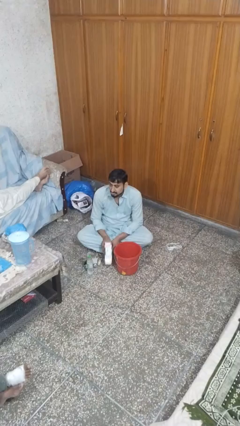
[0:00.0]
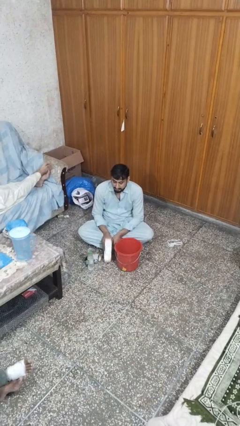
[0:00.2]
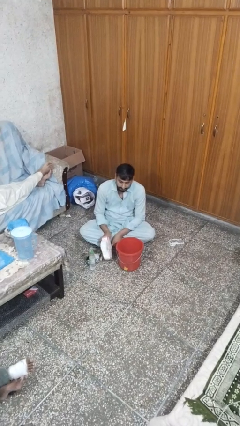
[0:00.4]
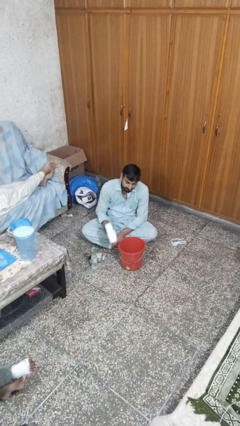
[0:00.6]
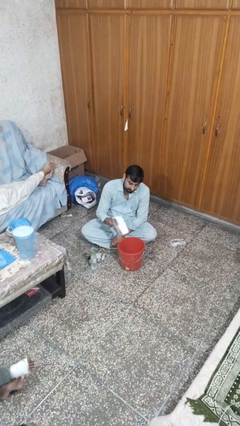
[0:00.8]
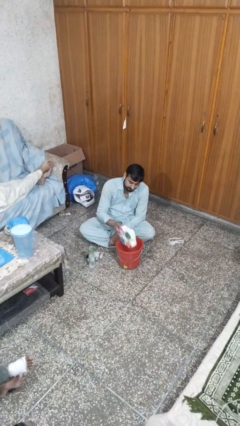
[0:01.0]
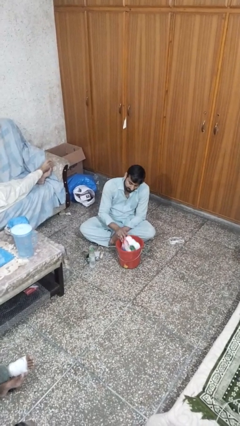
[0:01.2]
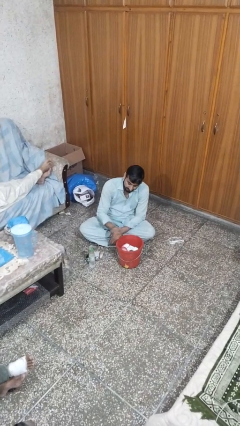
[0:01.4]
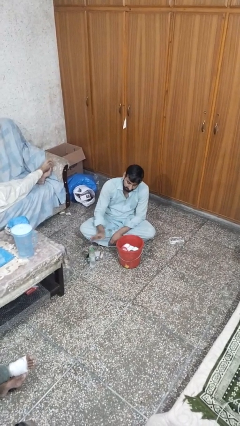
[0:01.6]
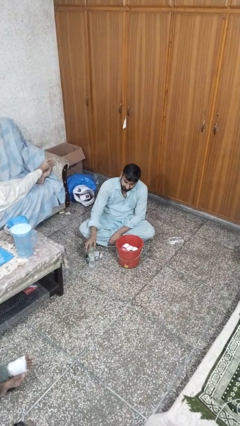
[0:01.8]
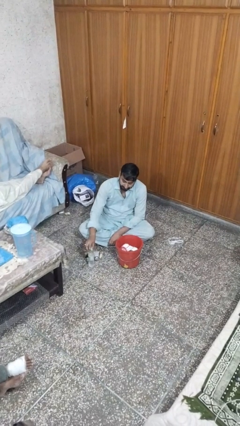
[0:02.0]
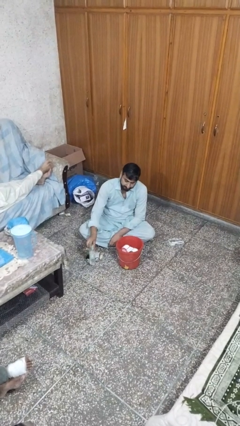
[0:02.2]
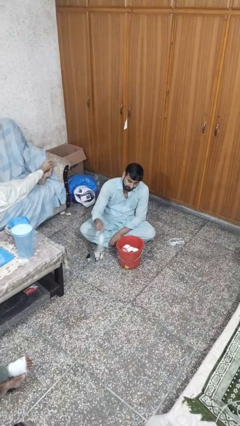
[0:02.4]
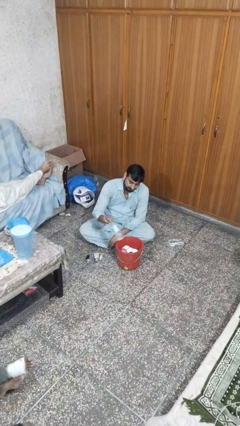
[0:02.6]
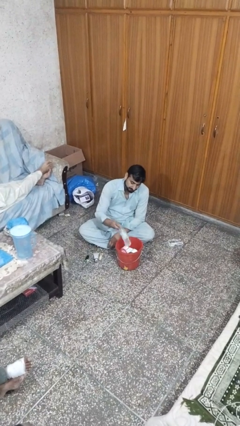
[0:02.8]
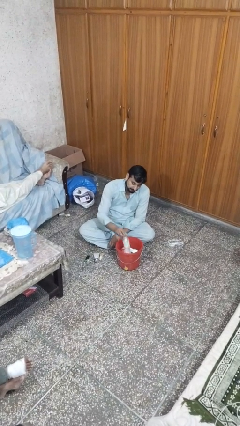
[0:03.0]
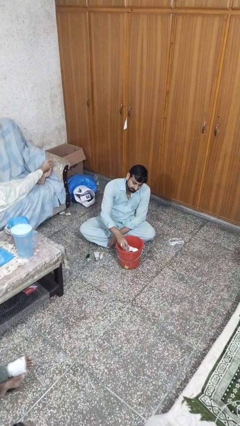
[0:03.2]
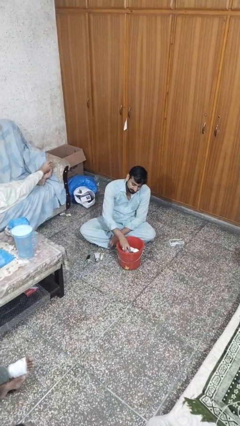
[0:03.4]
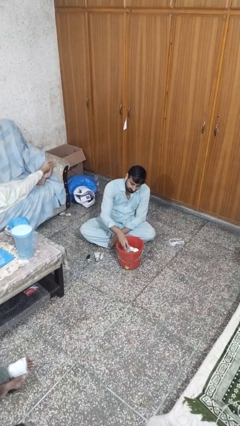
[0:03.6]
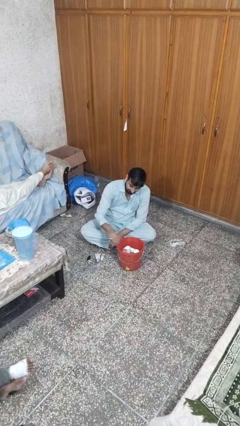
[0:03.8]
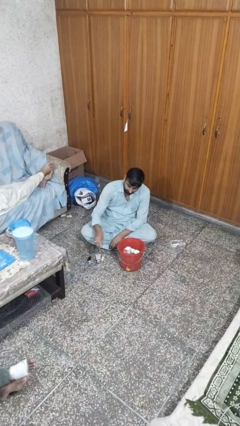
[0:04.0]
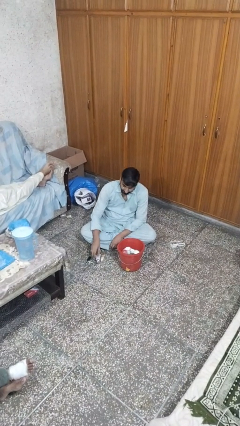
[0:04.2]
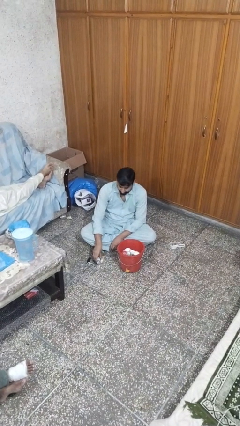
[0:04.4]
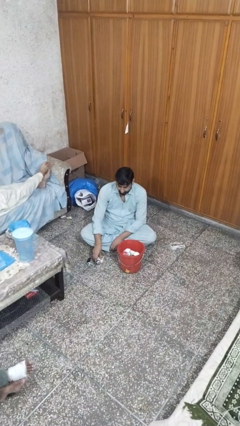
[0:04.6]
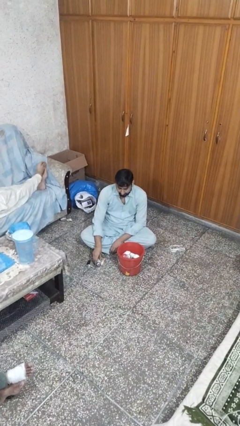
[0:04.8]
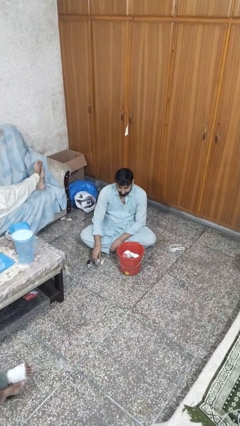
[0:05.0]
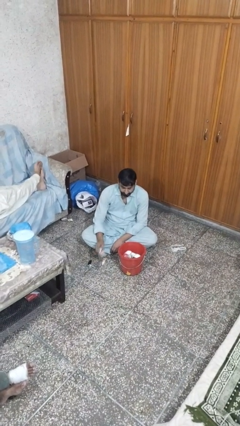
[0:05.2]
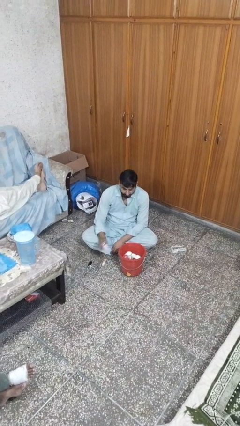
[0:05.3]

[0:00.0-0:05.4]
person puts object into basket

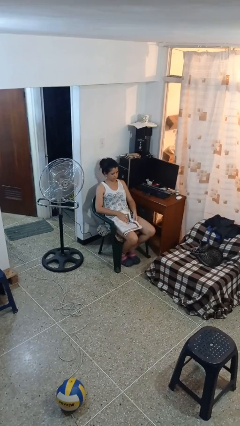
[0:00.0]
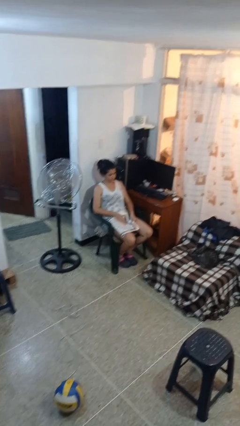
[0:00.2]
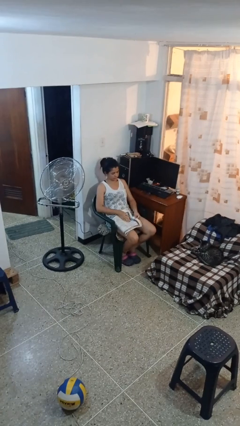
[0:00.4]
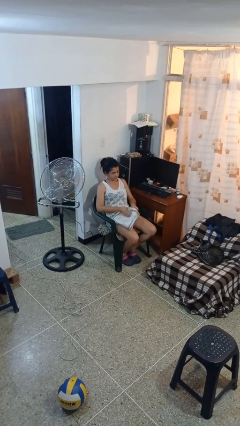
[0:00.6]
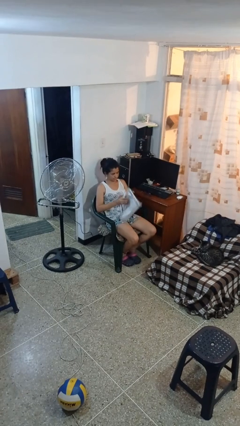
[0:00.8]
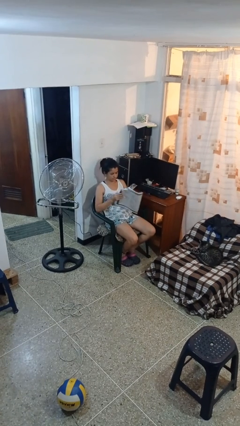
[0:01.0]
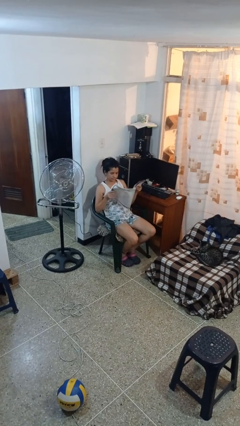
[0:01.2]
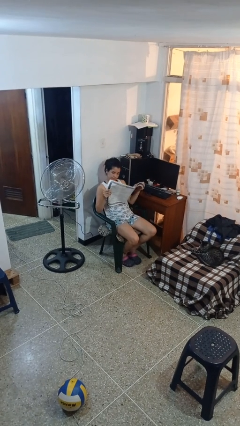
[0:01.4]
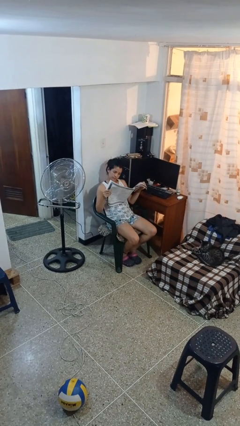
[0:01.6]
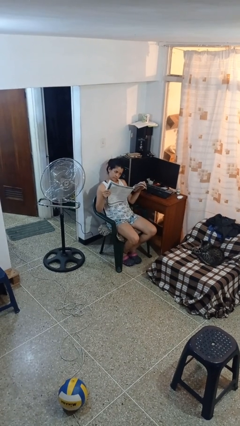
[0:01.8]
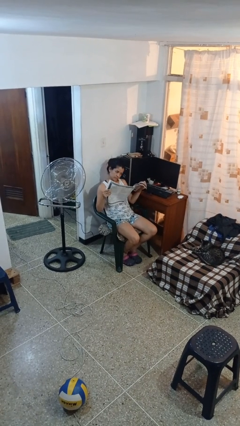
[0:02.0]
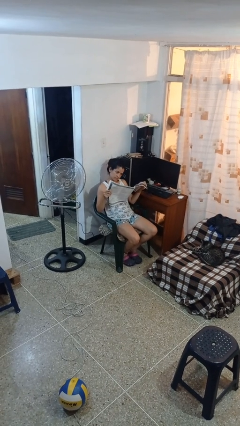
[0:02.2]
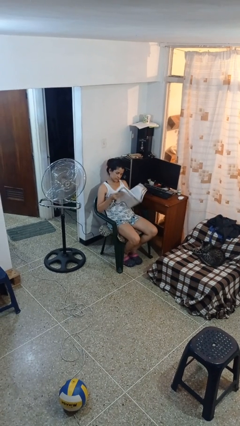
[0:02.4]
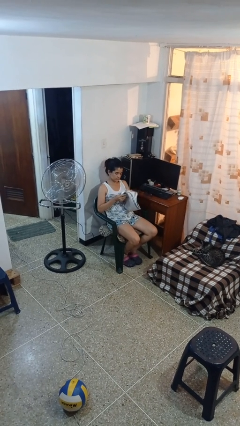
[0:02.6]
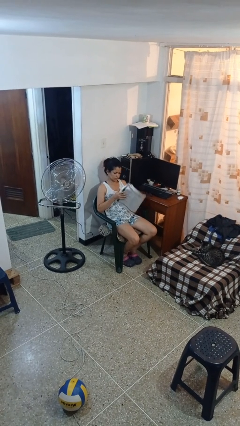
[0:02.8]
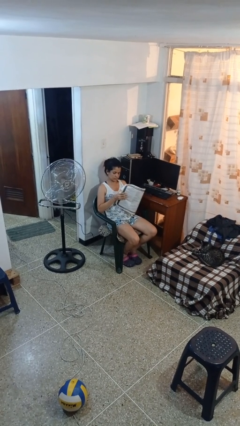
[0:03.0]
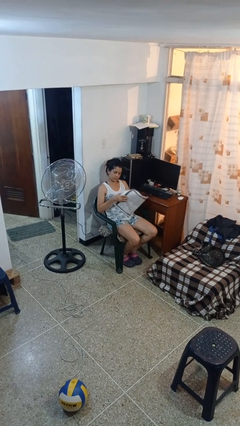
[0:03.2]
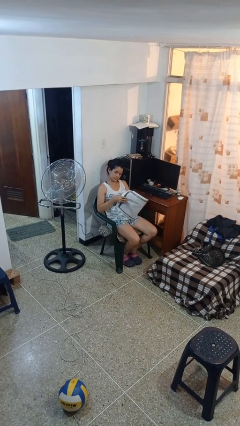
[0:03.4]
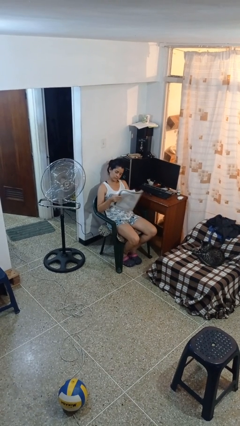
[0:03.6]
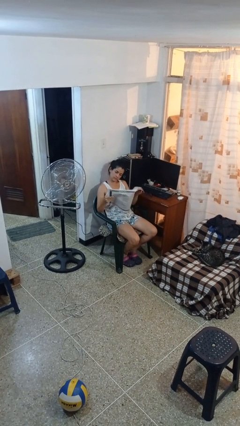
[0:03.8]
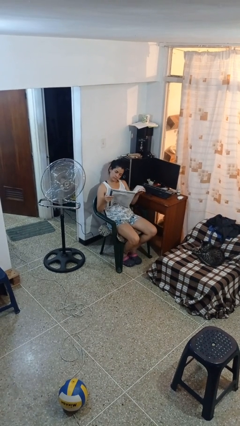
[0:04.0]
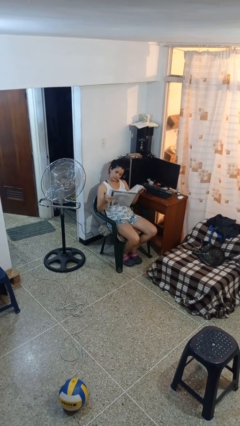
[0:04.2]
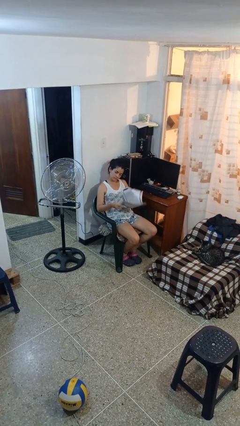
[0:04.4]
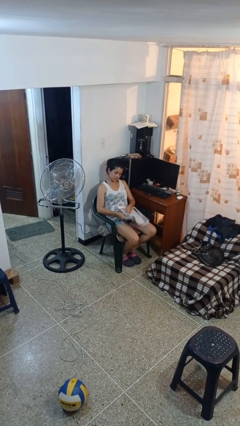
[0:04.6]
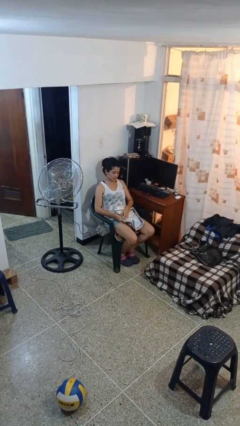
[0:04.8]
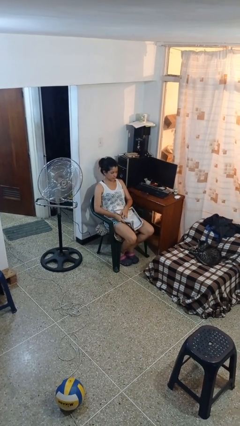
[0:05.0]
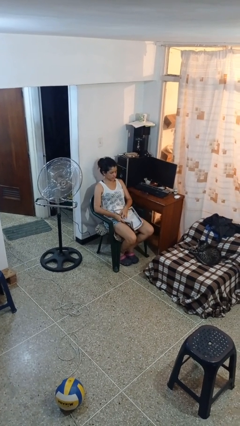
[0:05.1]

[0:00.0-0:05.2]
person reads newspaper

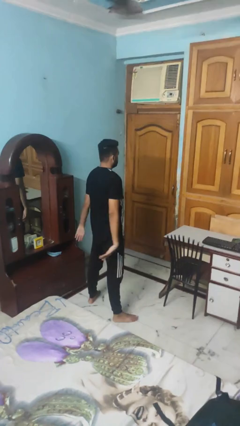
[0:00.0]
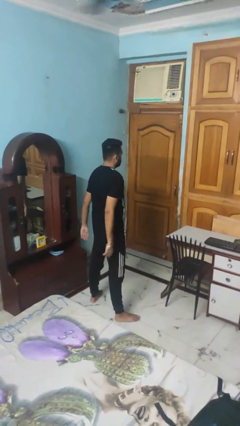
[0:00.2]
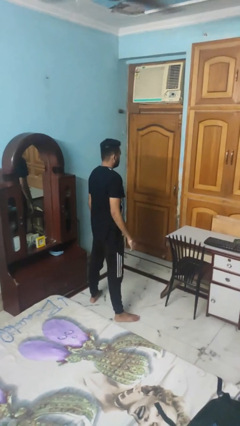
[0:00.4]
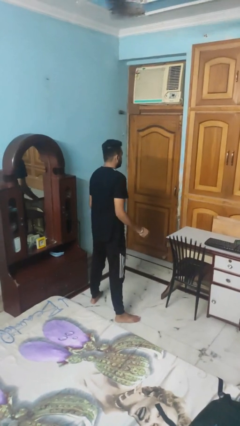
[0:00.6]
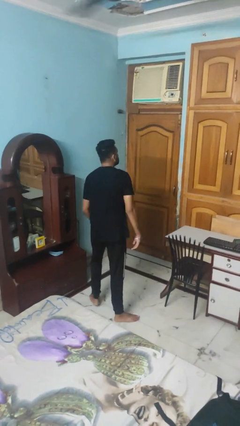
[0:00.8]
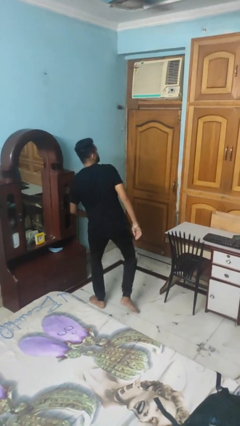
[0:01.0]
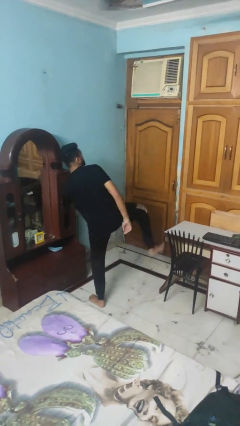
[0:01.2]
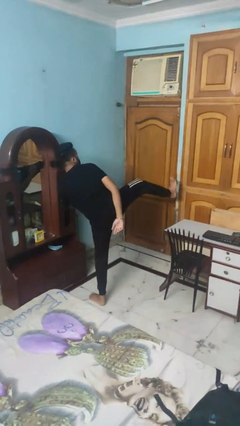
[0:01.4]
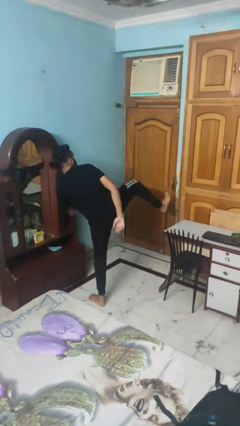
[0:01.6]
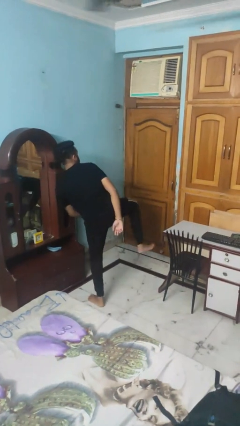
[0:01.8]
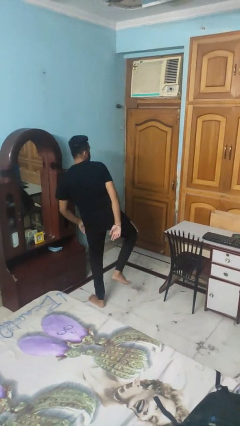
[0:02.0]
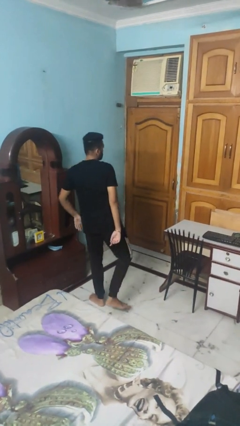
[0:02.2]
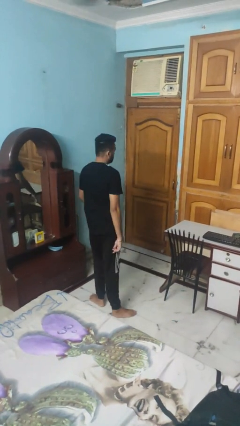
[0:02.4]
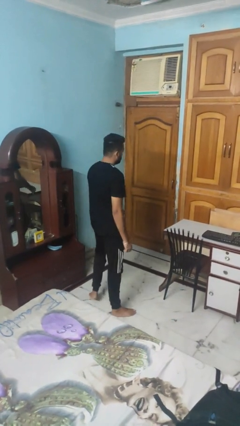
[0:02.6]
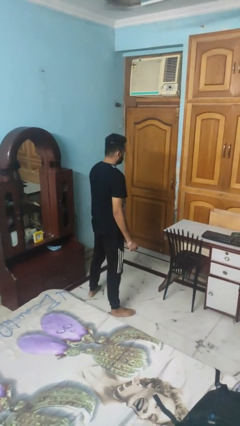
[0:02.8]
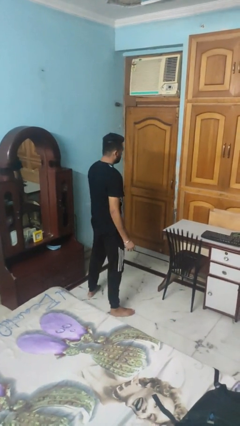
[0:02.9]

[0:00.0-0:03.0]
person karate kicks

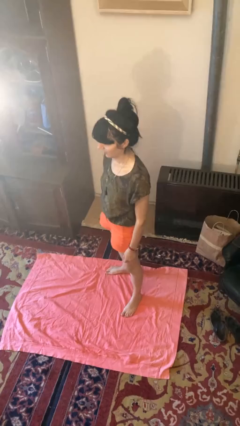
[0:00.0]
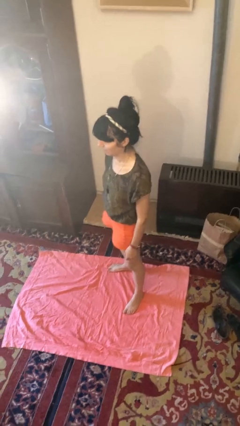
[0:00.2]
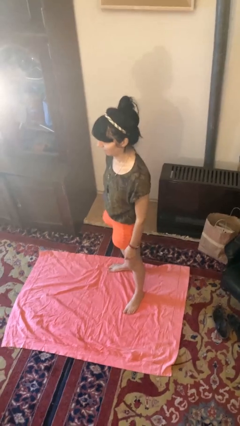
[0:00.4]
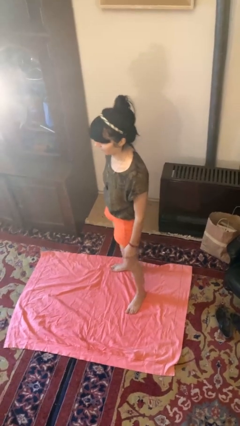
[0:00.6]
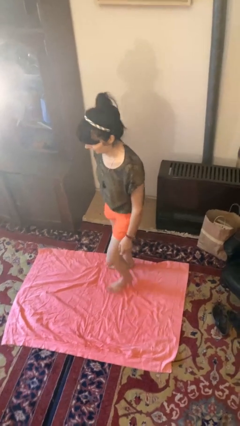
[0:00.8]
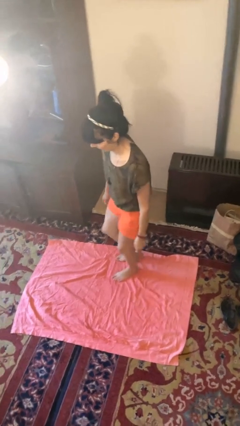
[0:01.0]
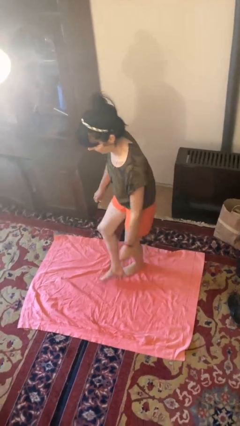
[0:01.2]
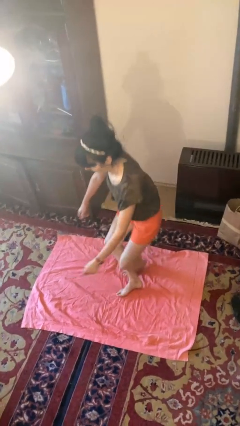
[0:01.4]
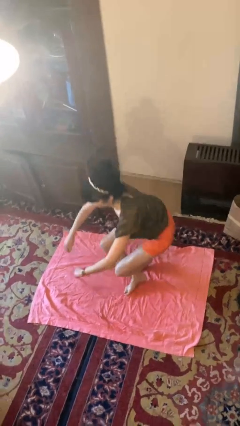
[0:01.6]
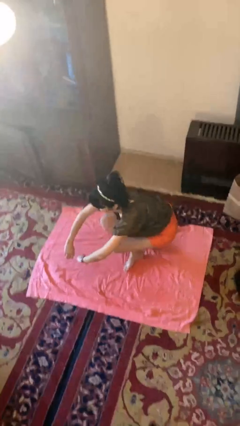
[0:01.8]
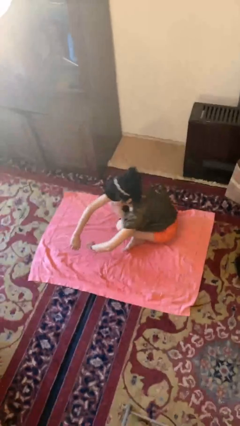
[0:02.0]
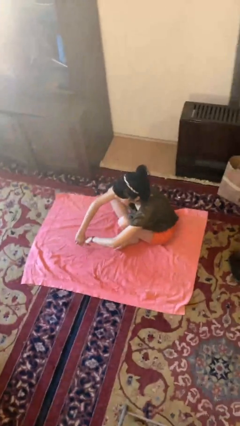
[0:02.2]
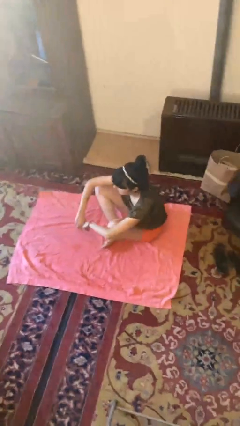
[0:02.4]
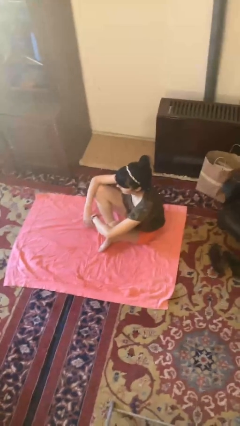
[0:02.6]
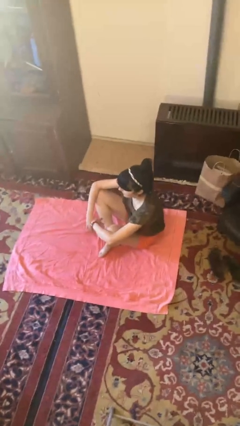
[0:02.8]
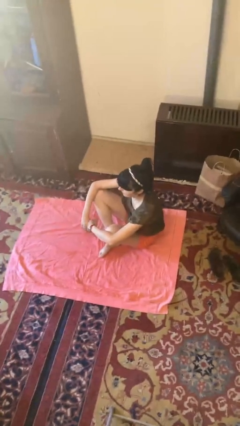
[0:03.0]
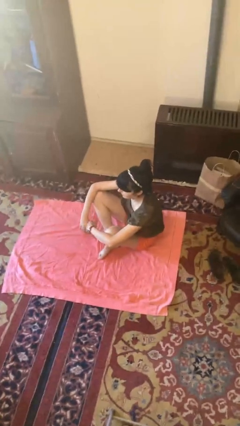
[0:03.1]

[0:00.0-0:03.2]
person sits crisscross

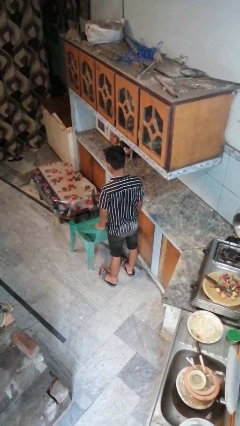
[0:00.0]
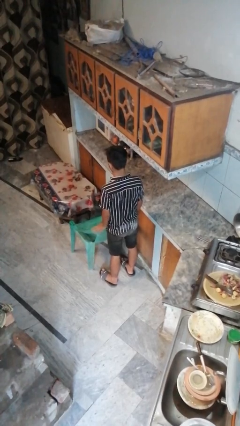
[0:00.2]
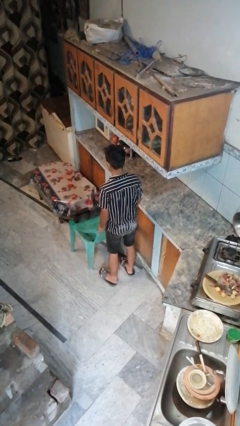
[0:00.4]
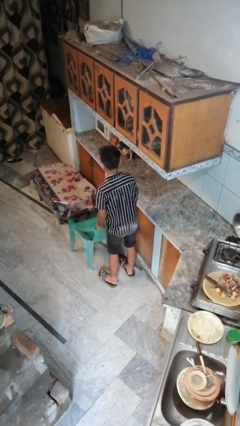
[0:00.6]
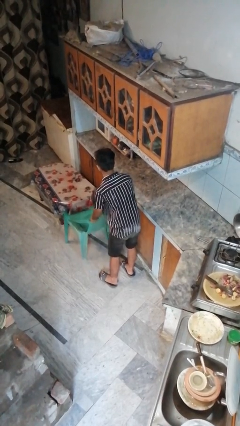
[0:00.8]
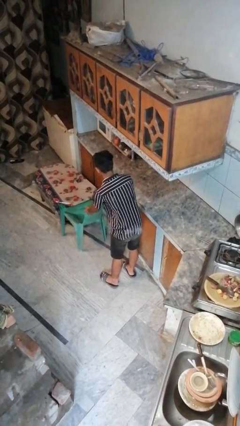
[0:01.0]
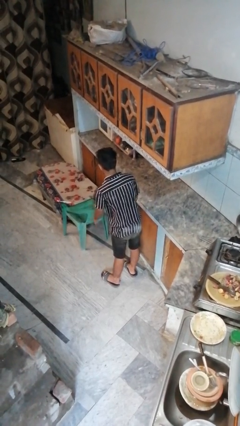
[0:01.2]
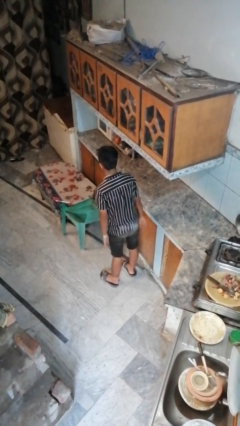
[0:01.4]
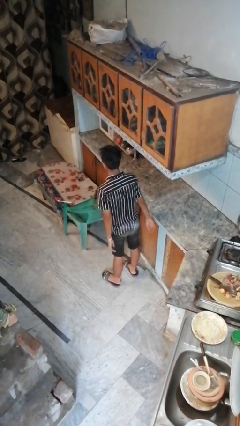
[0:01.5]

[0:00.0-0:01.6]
person pushes in chair
